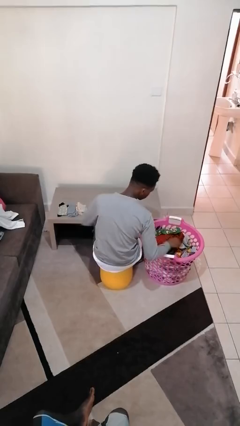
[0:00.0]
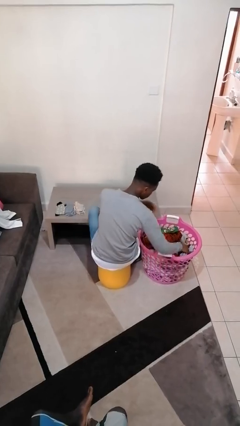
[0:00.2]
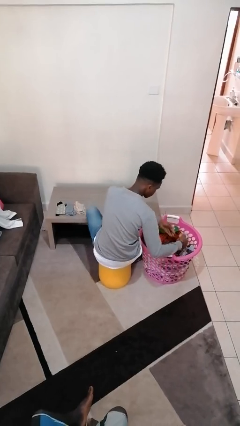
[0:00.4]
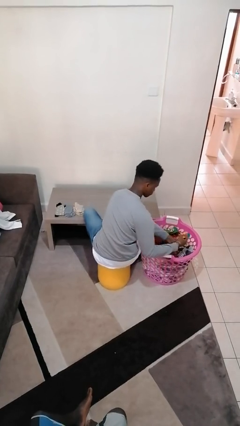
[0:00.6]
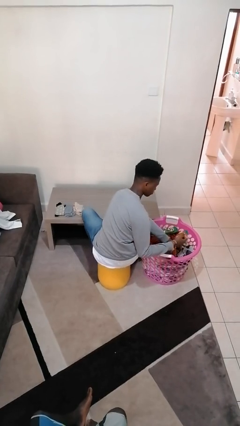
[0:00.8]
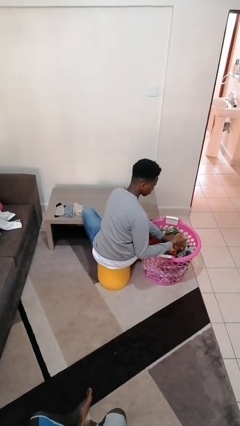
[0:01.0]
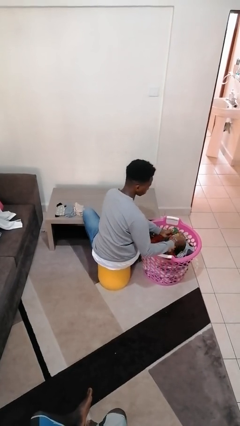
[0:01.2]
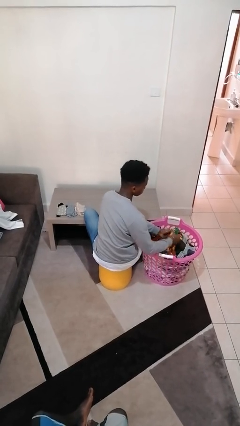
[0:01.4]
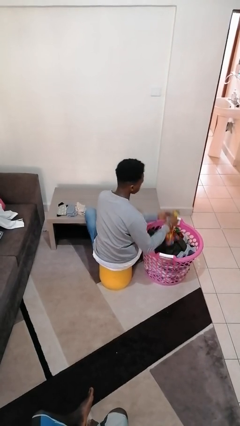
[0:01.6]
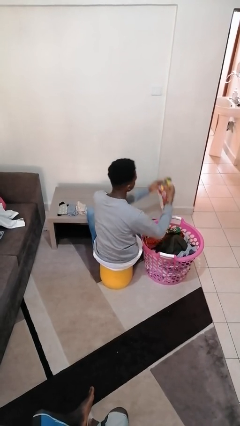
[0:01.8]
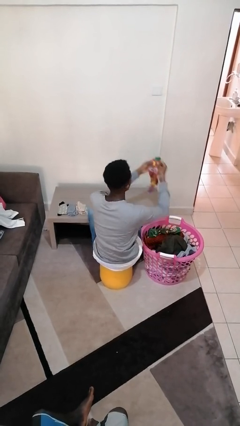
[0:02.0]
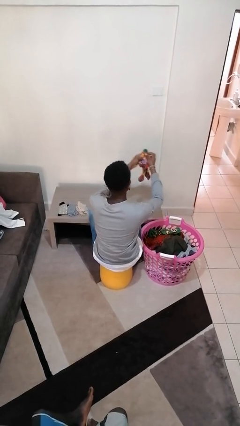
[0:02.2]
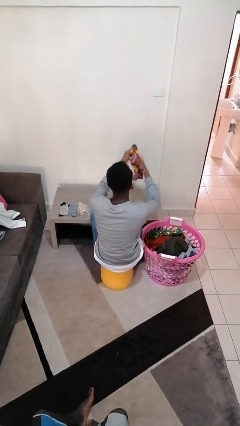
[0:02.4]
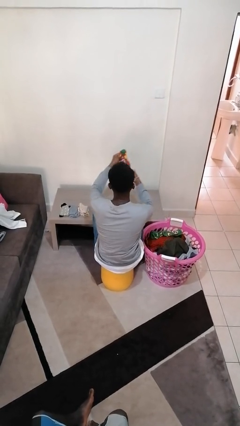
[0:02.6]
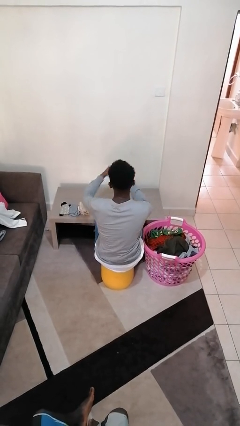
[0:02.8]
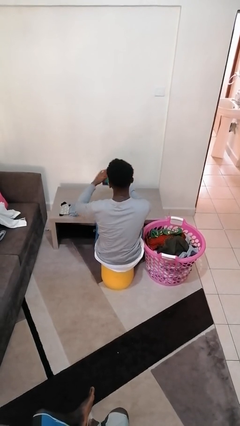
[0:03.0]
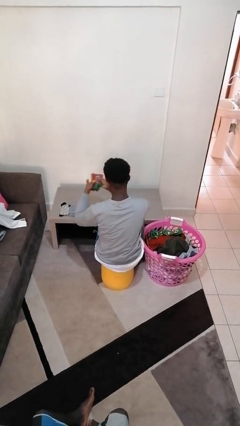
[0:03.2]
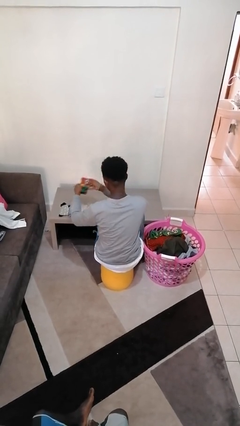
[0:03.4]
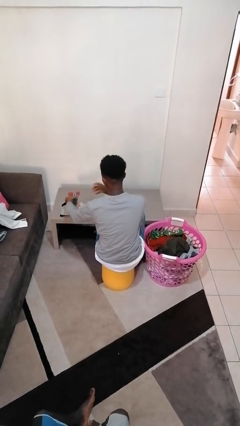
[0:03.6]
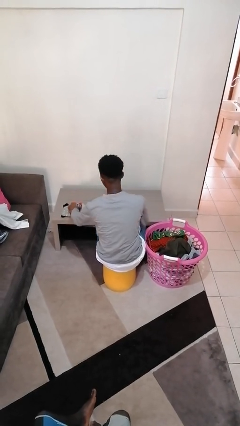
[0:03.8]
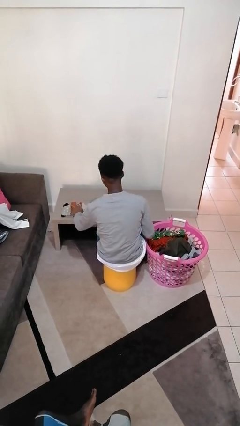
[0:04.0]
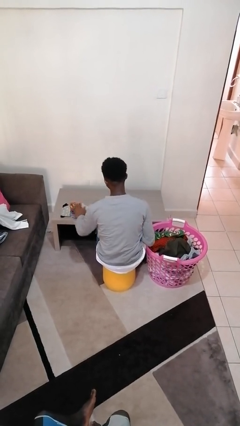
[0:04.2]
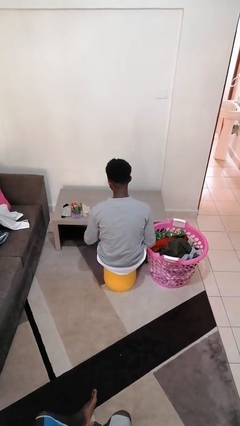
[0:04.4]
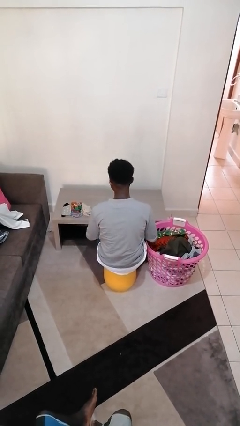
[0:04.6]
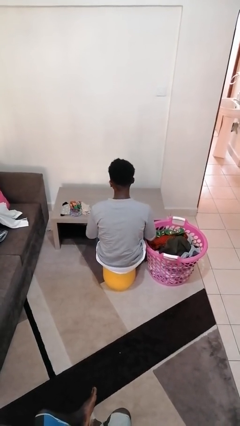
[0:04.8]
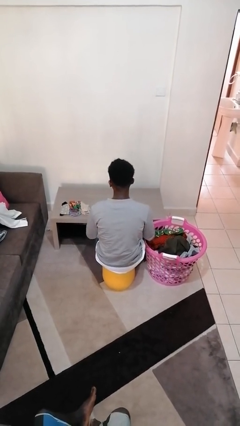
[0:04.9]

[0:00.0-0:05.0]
person folds socks

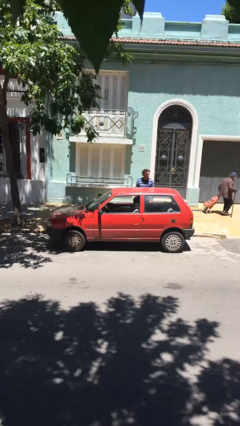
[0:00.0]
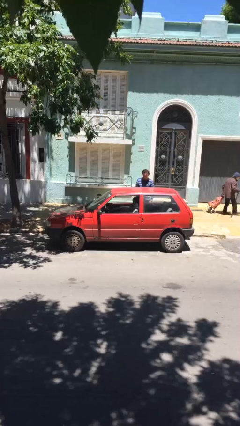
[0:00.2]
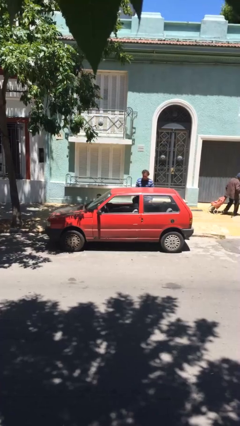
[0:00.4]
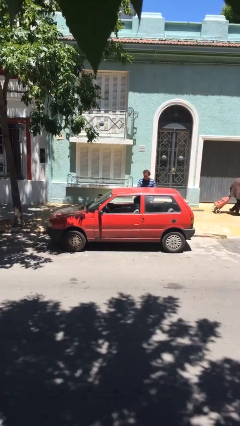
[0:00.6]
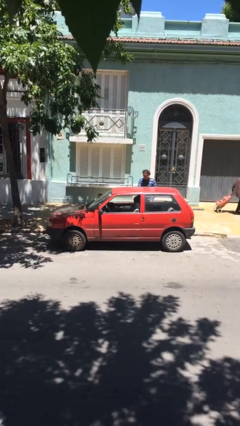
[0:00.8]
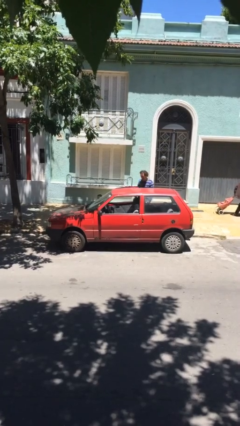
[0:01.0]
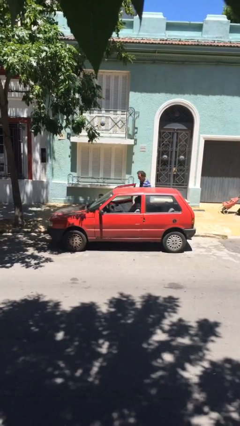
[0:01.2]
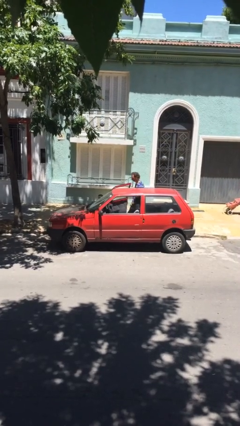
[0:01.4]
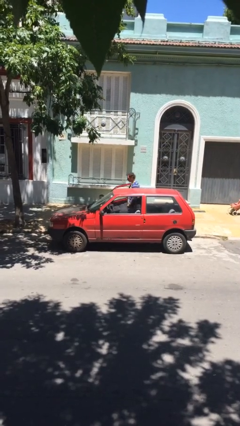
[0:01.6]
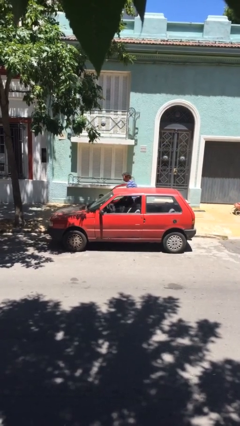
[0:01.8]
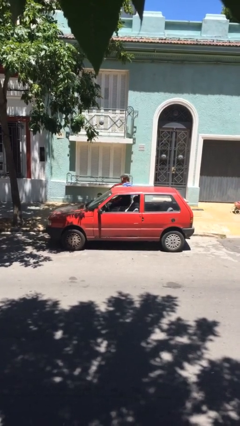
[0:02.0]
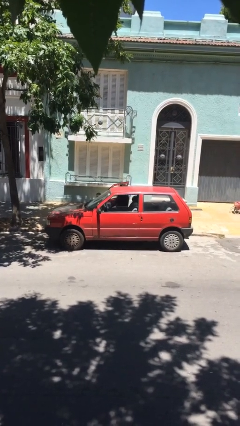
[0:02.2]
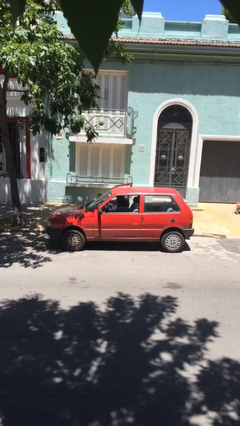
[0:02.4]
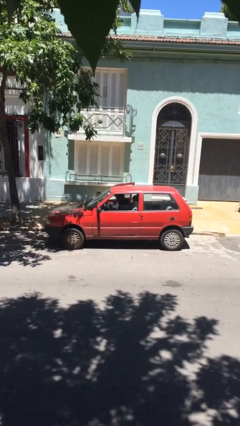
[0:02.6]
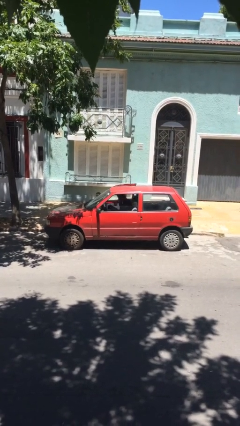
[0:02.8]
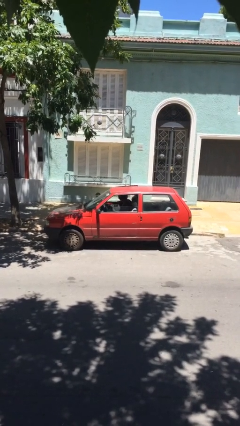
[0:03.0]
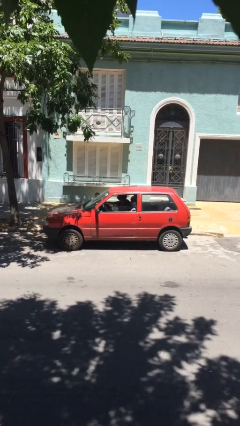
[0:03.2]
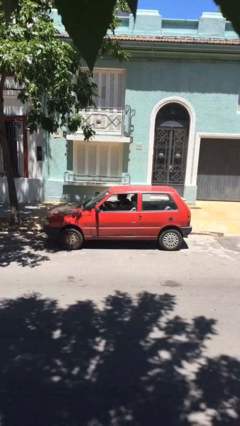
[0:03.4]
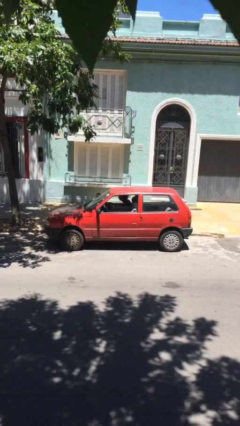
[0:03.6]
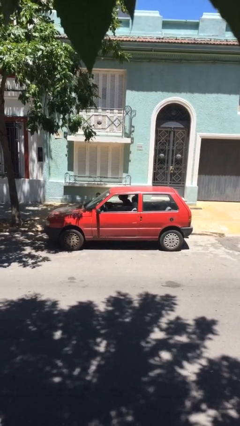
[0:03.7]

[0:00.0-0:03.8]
car picks up person

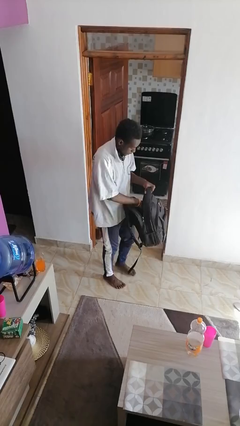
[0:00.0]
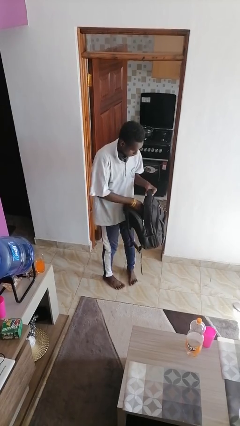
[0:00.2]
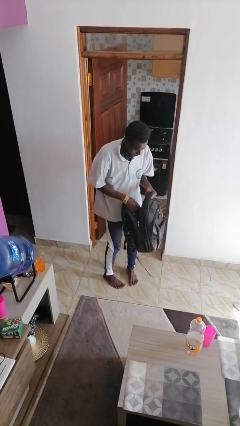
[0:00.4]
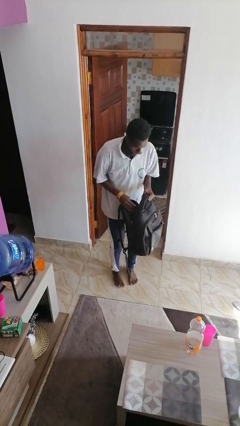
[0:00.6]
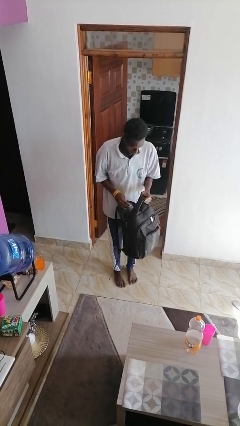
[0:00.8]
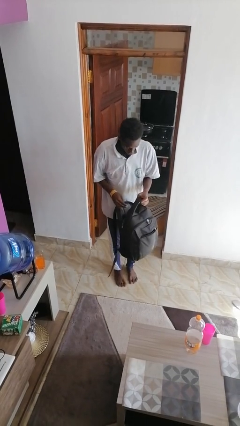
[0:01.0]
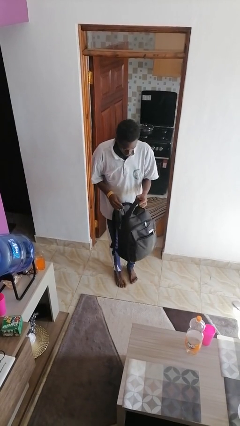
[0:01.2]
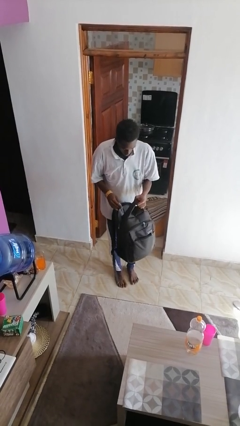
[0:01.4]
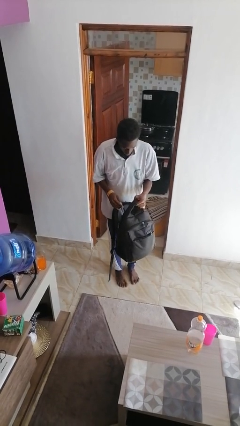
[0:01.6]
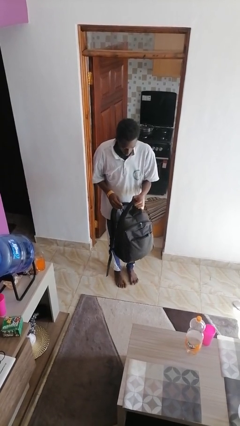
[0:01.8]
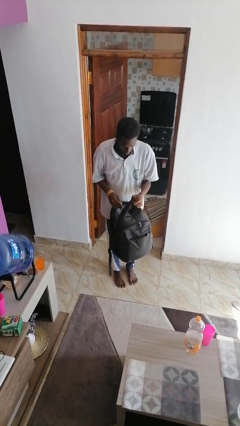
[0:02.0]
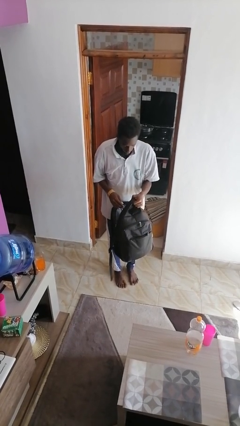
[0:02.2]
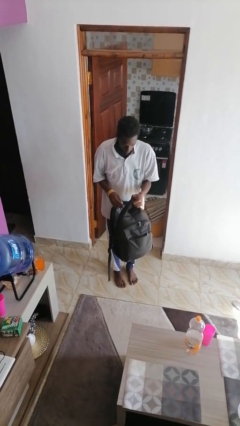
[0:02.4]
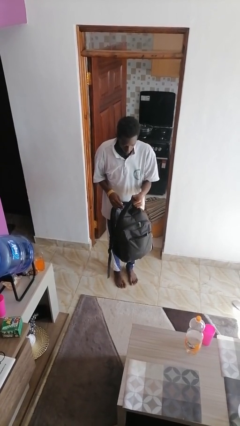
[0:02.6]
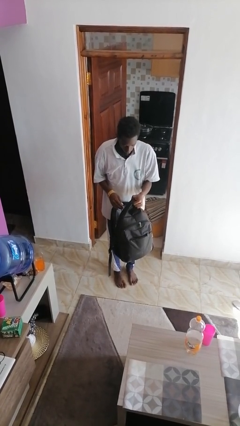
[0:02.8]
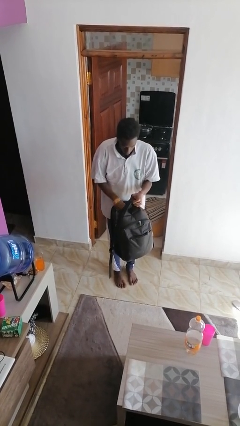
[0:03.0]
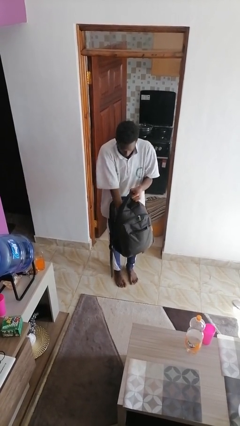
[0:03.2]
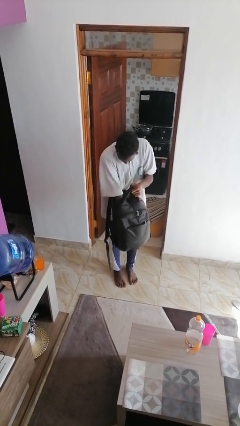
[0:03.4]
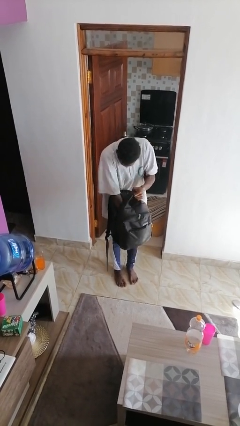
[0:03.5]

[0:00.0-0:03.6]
person puts object into backpack

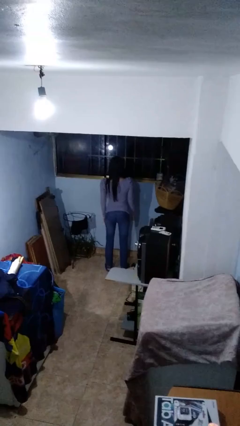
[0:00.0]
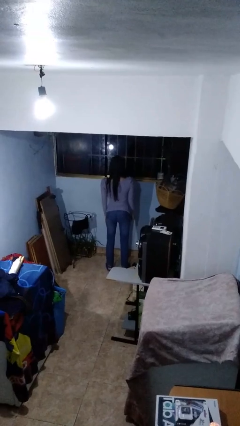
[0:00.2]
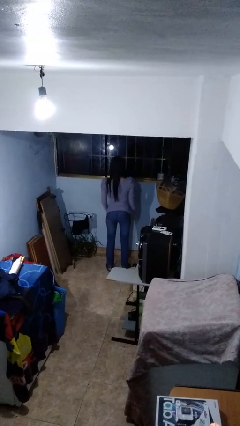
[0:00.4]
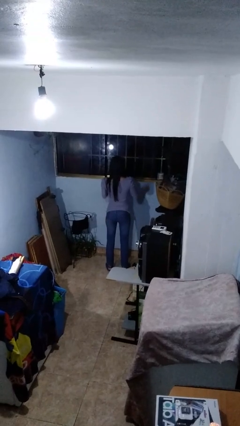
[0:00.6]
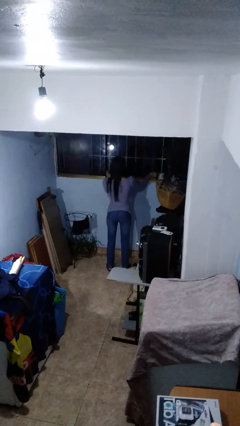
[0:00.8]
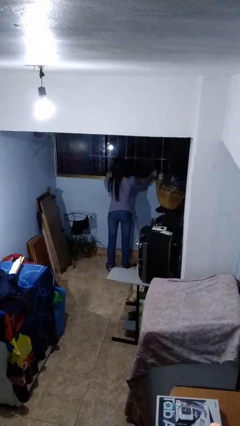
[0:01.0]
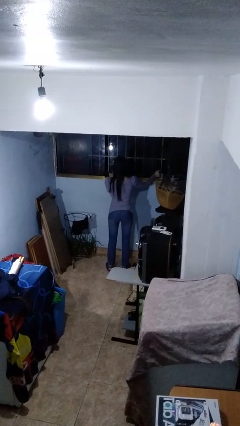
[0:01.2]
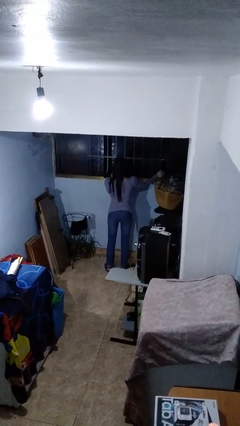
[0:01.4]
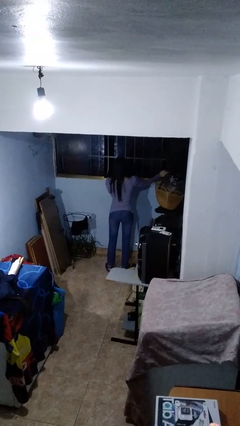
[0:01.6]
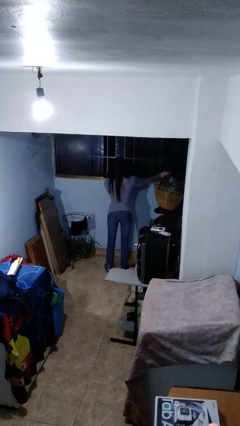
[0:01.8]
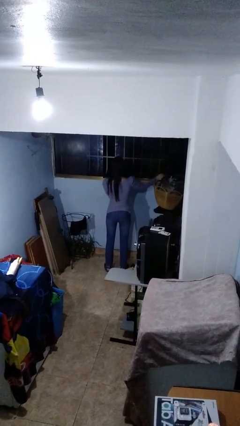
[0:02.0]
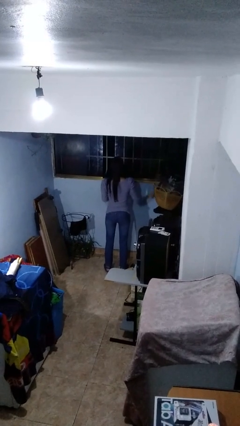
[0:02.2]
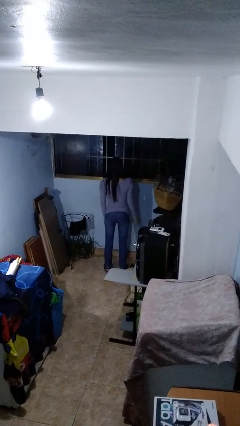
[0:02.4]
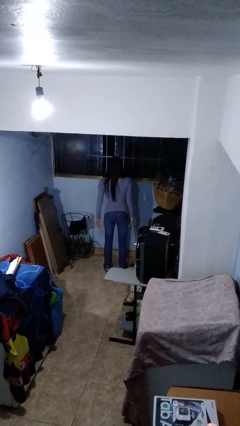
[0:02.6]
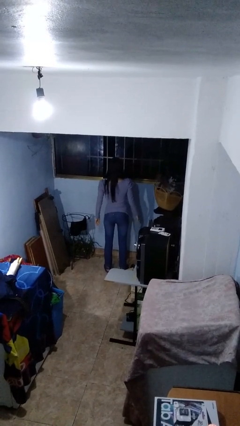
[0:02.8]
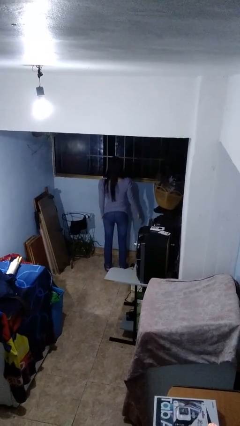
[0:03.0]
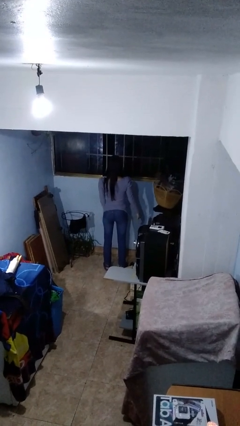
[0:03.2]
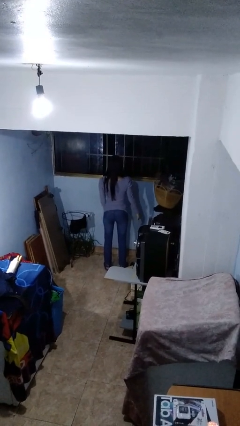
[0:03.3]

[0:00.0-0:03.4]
person opens home window

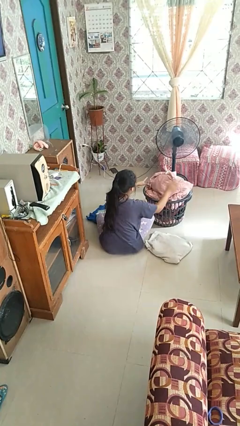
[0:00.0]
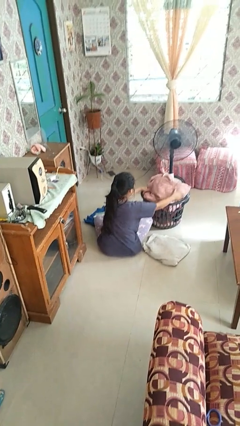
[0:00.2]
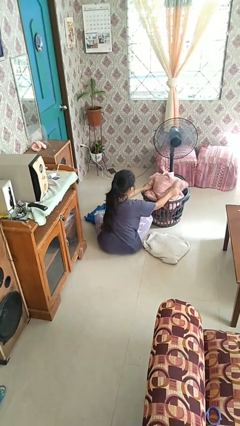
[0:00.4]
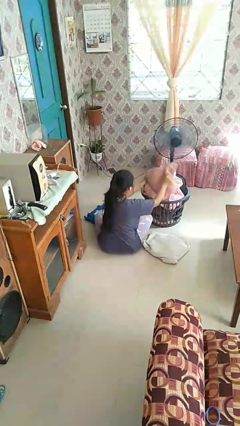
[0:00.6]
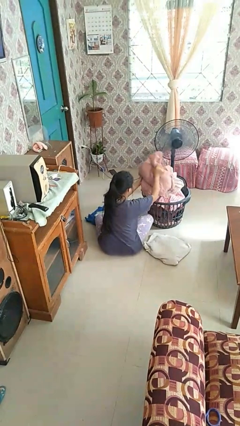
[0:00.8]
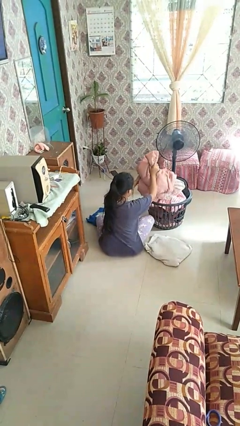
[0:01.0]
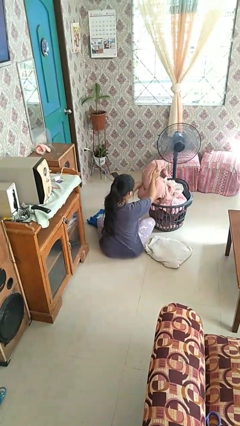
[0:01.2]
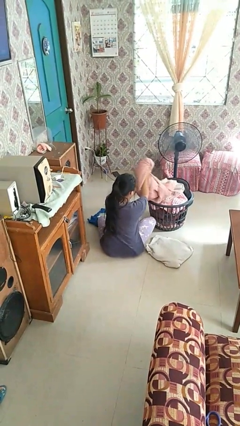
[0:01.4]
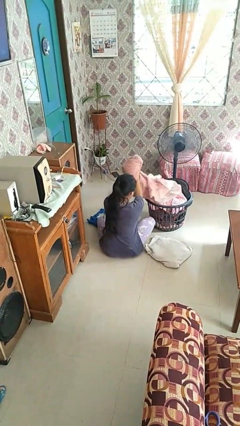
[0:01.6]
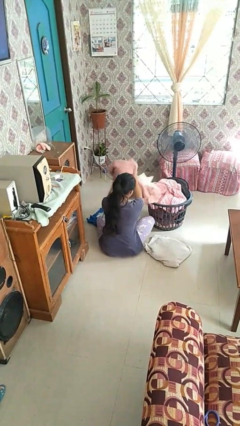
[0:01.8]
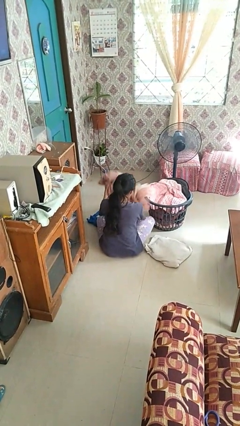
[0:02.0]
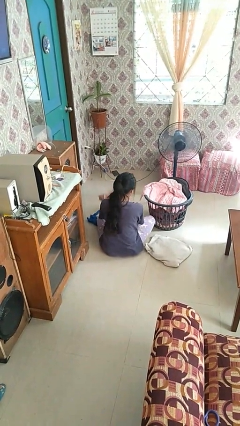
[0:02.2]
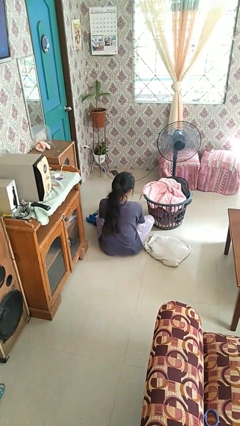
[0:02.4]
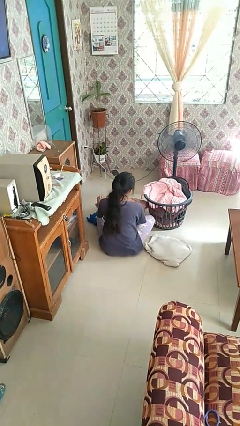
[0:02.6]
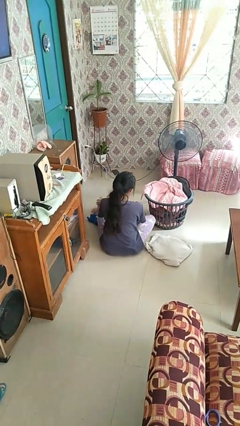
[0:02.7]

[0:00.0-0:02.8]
person takes object from basket
